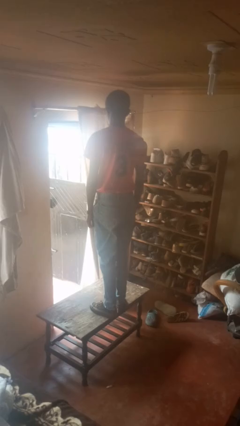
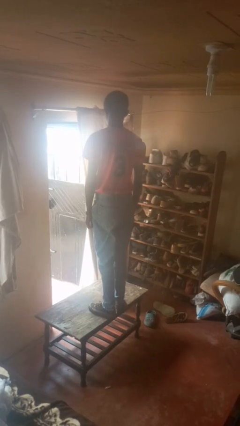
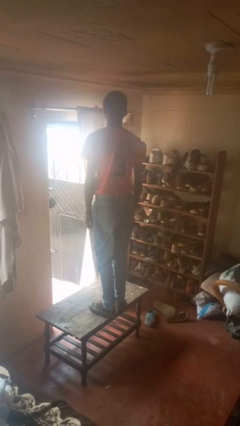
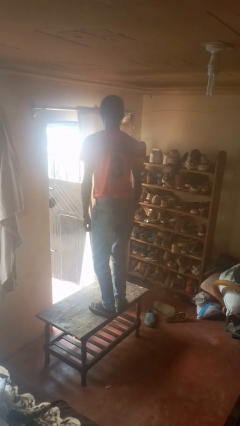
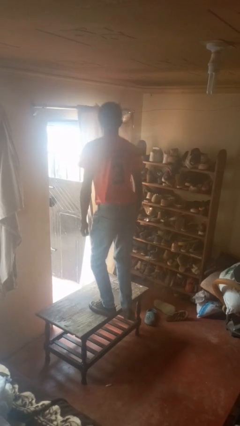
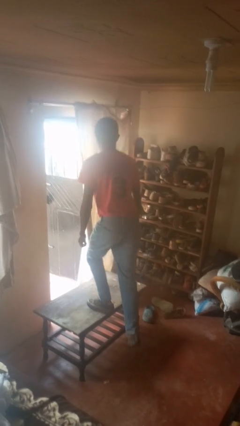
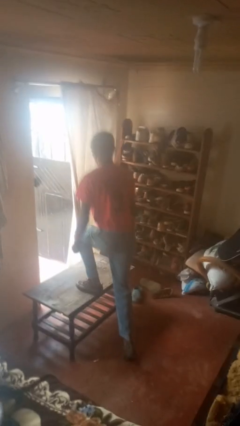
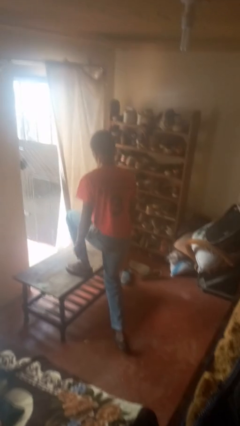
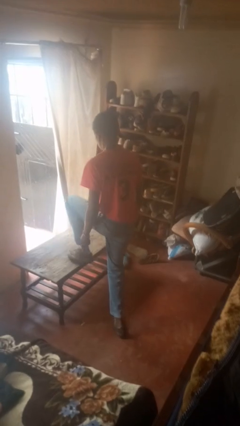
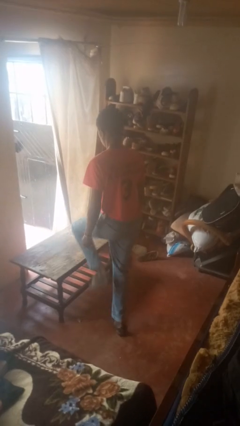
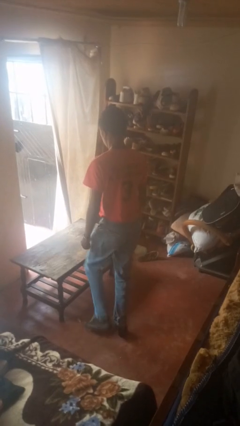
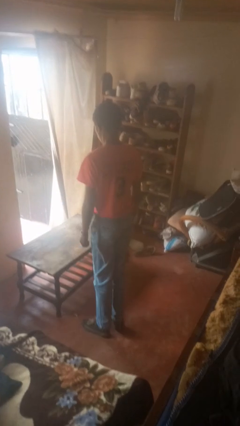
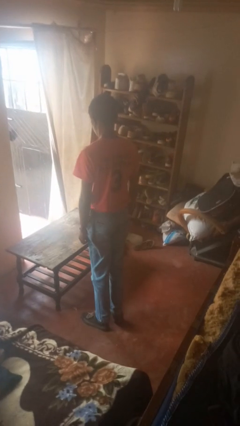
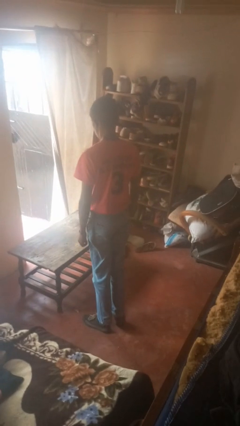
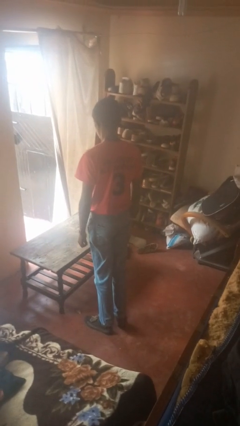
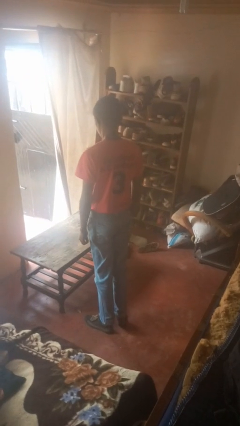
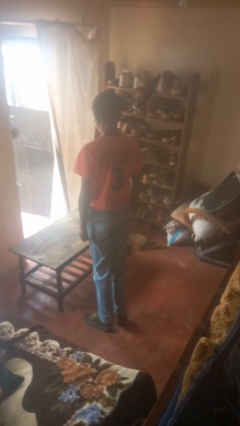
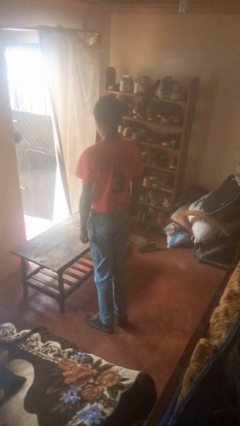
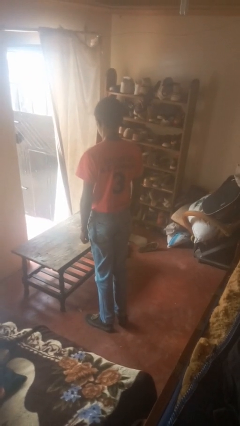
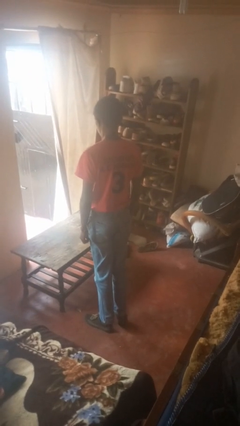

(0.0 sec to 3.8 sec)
person climbs off table

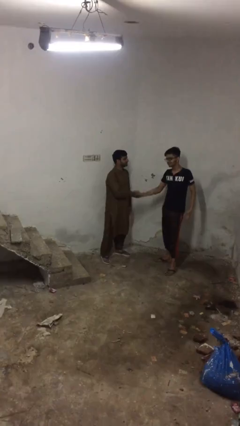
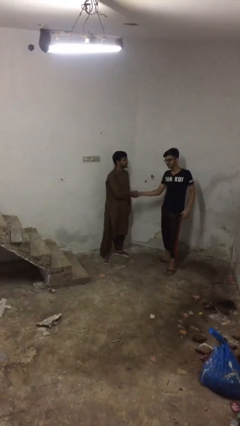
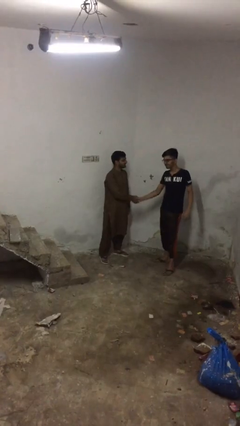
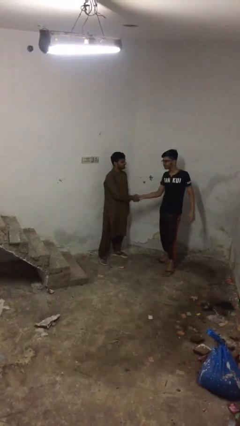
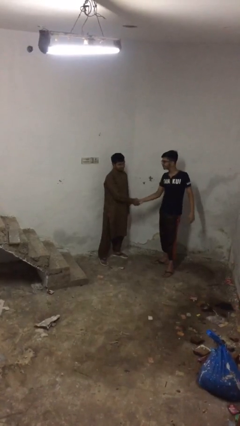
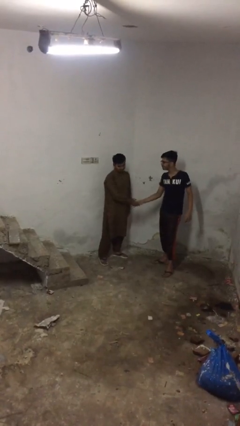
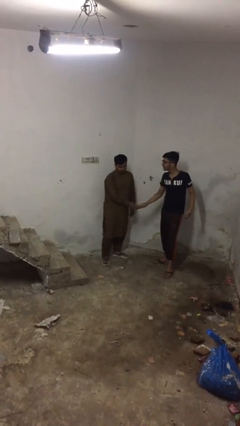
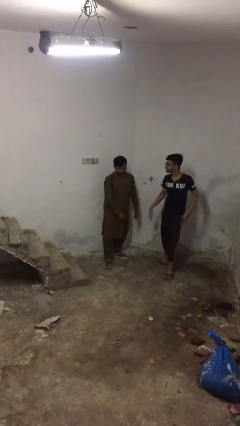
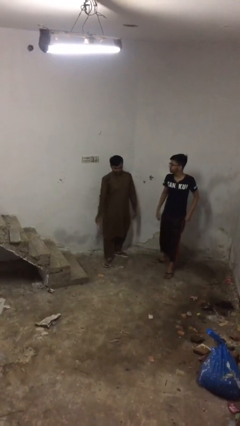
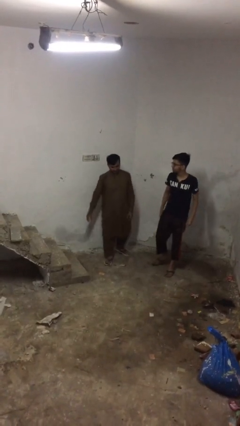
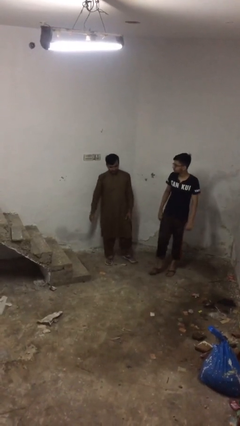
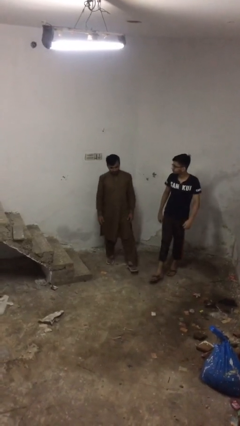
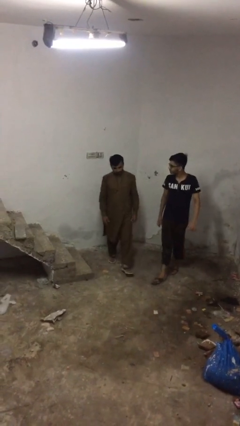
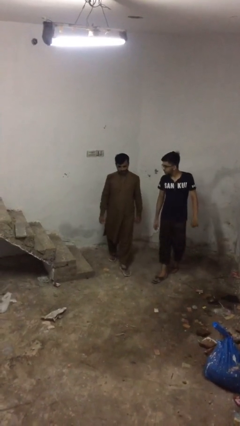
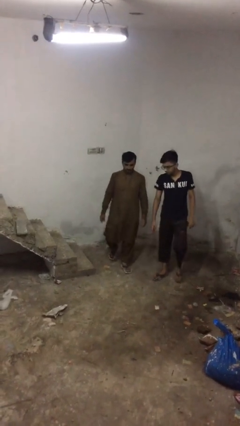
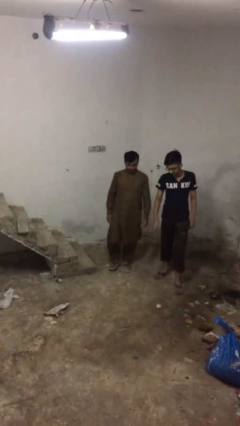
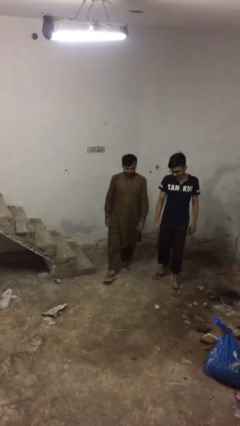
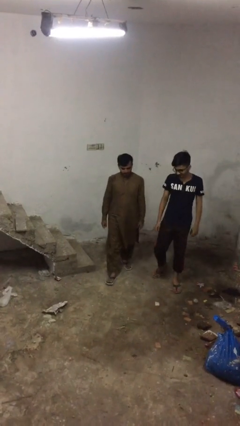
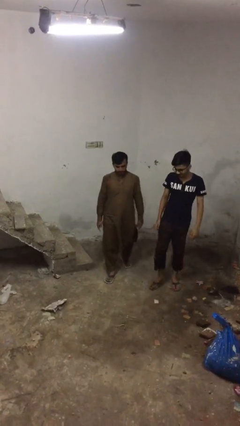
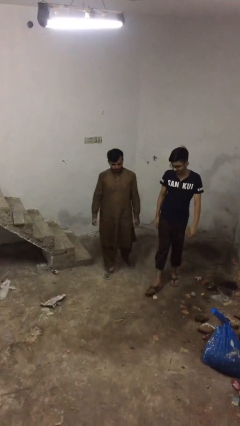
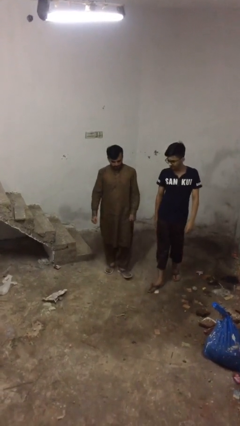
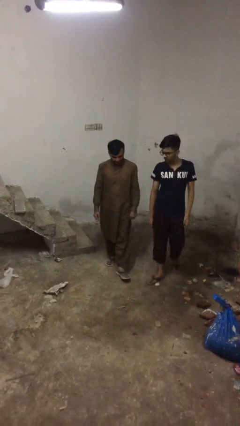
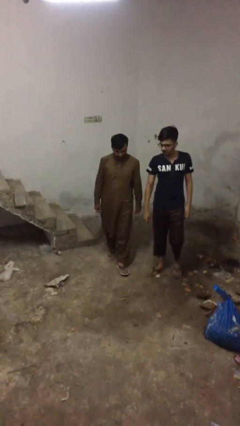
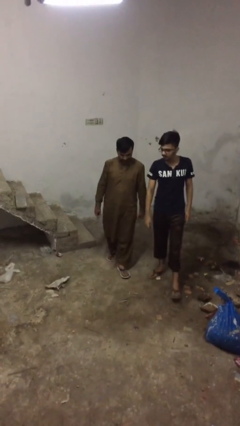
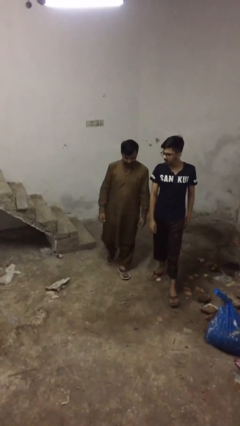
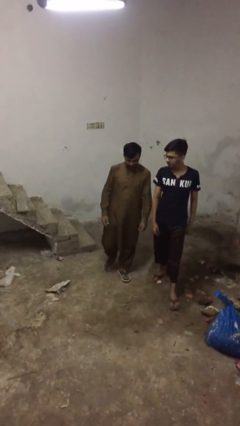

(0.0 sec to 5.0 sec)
person talks to person
